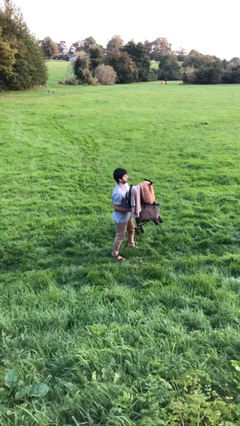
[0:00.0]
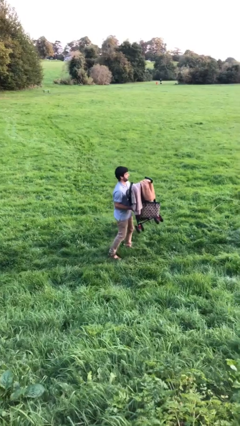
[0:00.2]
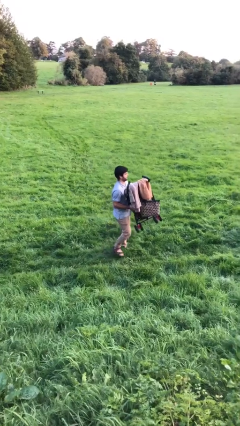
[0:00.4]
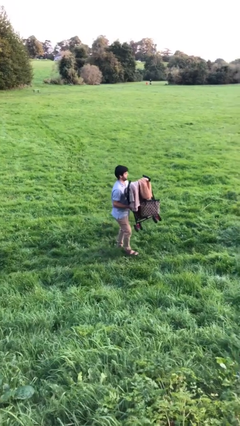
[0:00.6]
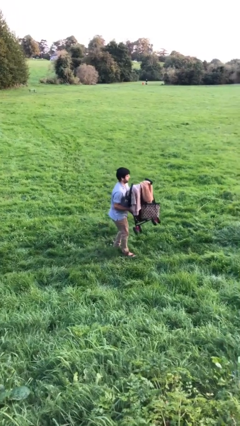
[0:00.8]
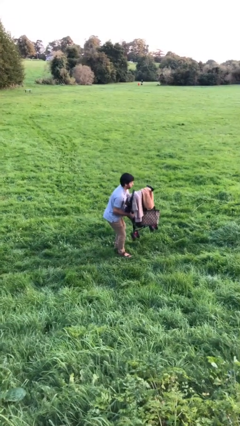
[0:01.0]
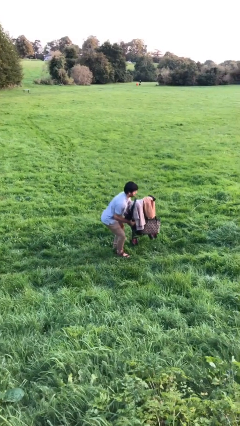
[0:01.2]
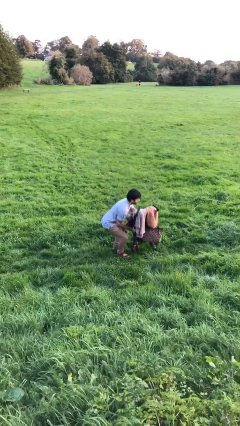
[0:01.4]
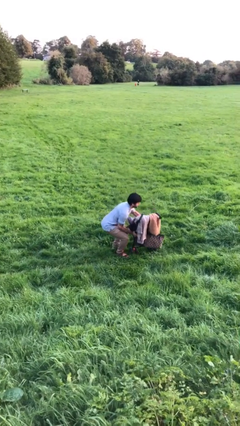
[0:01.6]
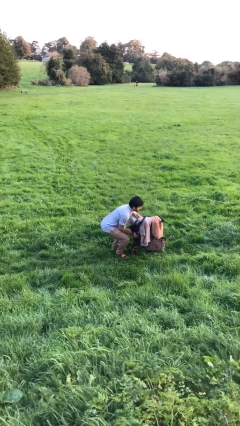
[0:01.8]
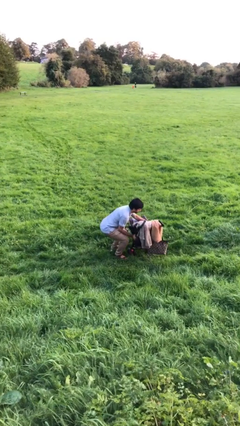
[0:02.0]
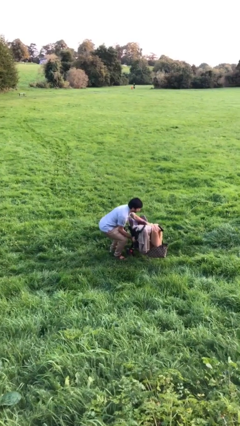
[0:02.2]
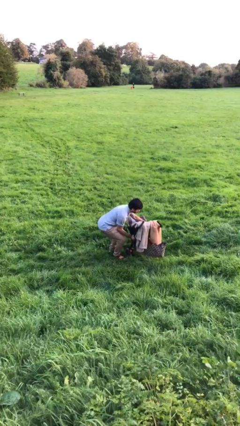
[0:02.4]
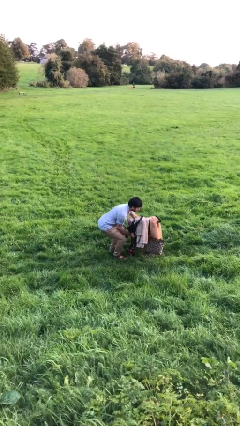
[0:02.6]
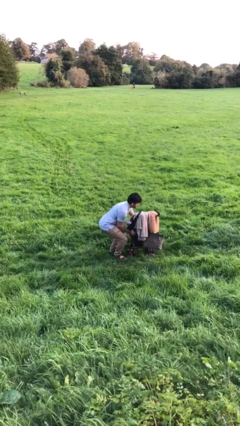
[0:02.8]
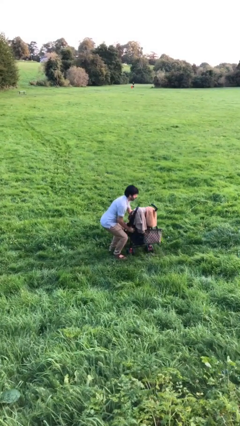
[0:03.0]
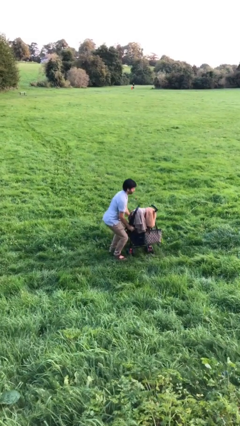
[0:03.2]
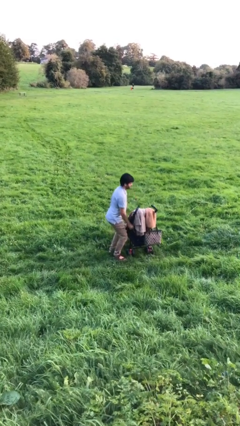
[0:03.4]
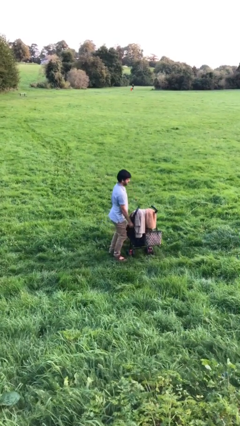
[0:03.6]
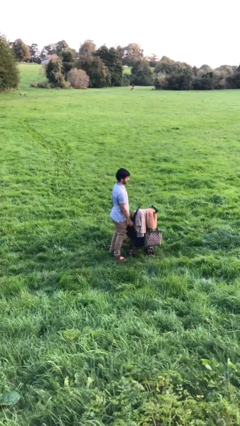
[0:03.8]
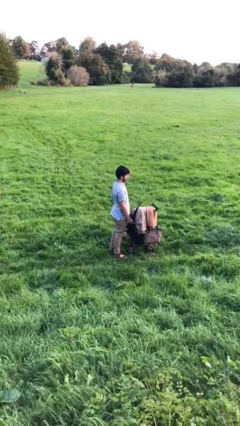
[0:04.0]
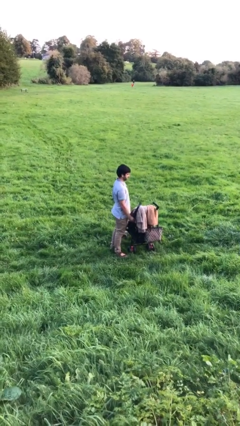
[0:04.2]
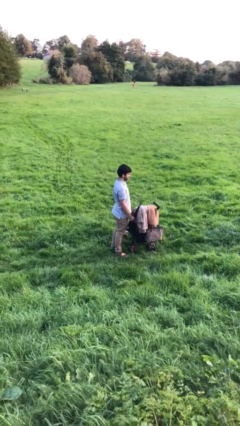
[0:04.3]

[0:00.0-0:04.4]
person puts down object on floor

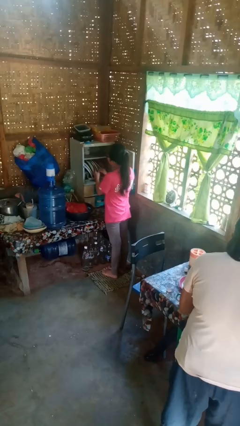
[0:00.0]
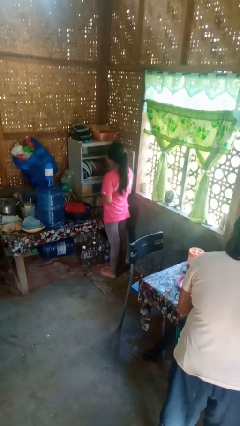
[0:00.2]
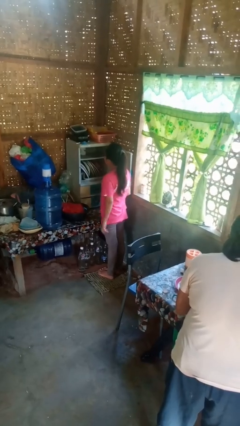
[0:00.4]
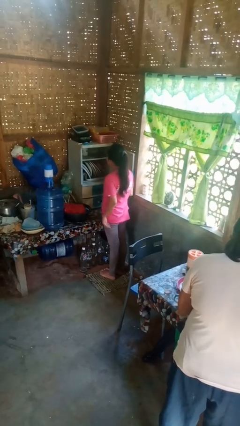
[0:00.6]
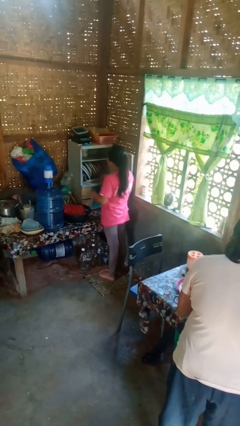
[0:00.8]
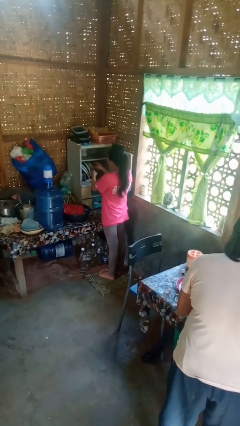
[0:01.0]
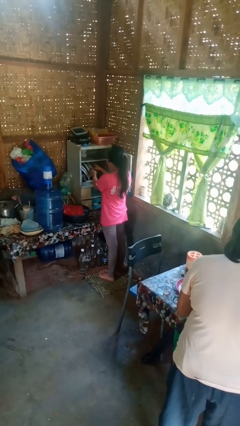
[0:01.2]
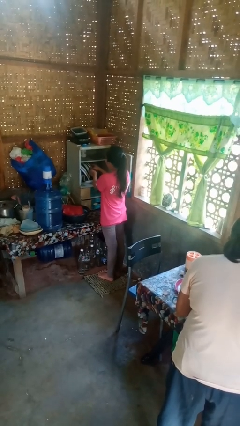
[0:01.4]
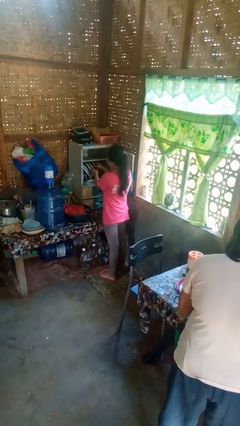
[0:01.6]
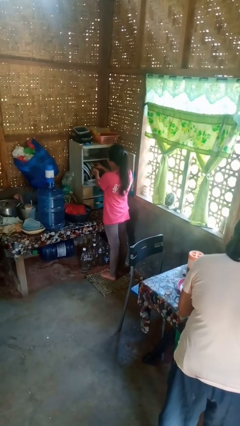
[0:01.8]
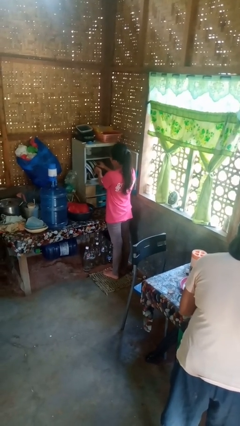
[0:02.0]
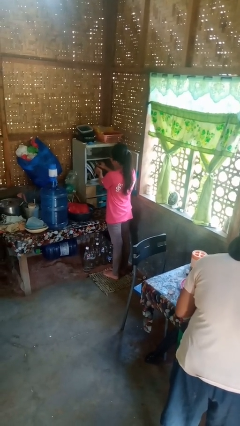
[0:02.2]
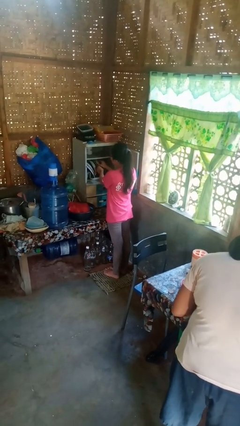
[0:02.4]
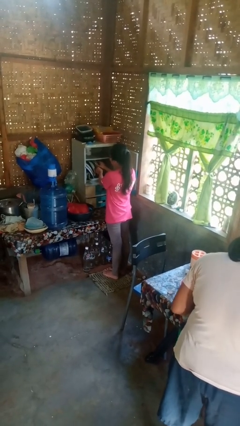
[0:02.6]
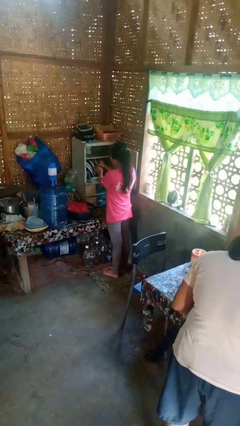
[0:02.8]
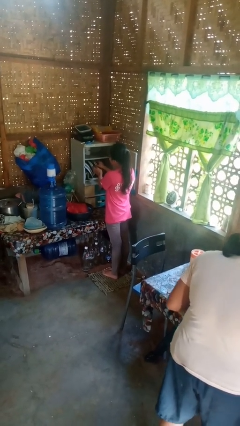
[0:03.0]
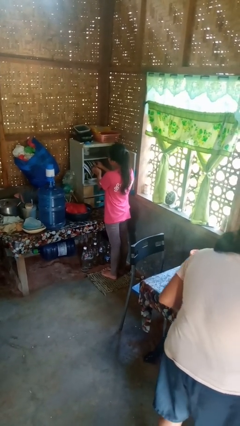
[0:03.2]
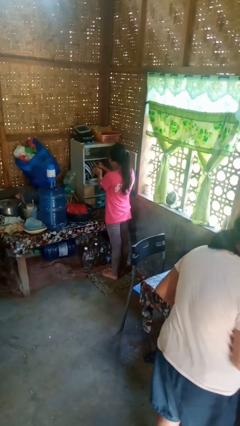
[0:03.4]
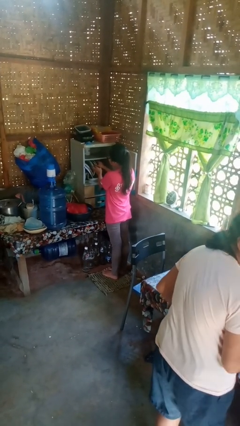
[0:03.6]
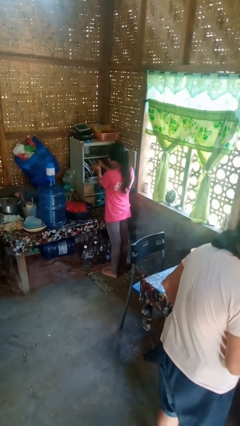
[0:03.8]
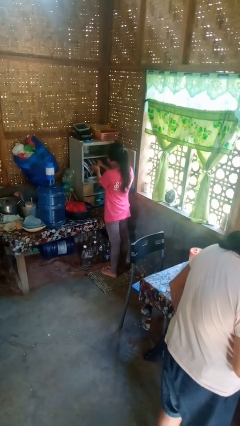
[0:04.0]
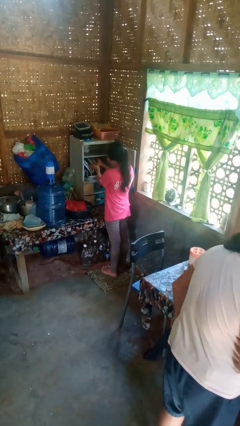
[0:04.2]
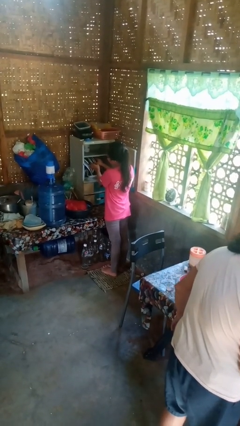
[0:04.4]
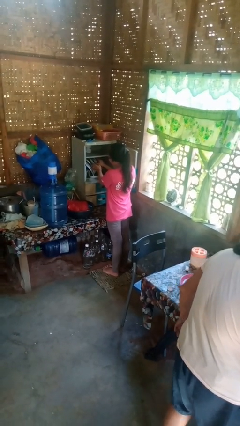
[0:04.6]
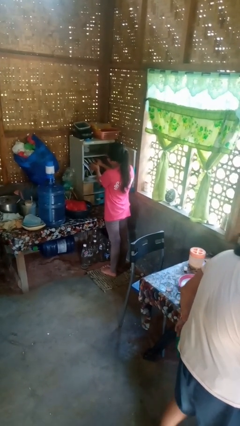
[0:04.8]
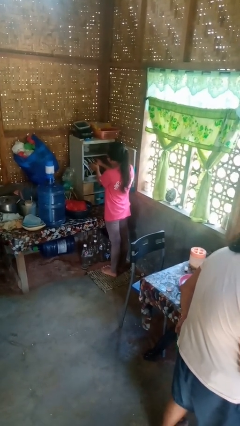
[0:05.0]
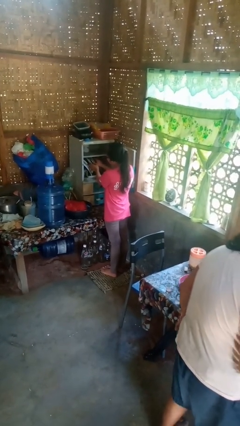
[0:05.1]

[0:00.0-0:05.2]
person searches in cabinet

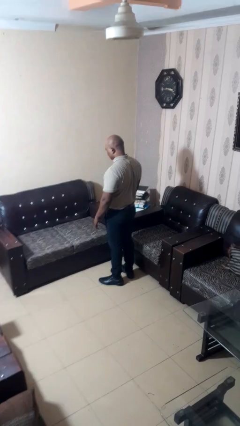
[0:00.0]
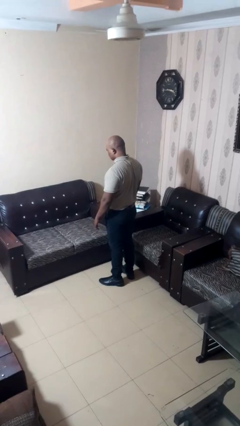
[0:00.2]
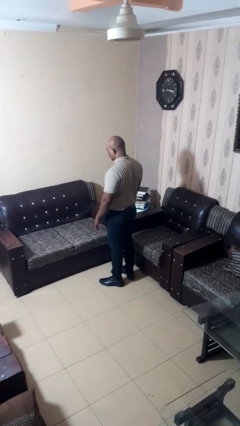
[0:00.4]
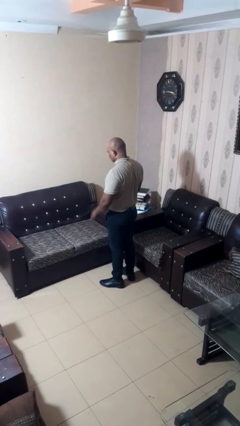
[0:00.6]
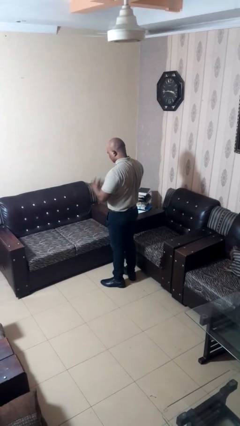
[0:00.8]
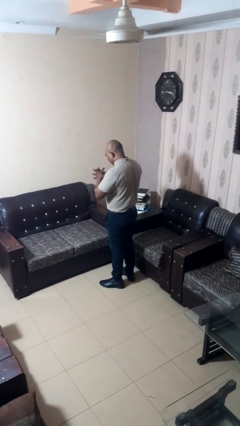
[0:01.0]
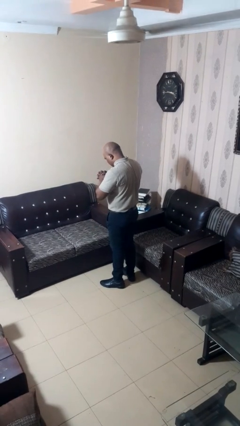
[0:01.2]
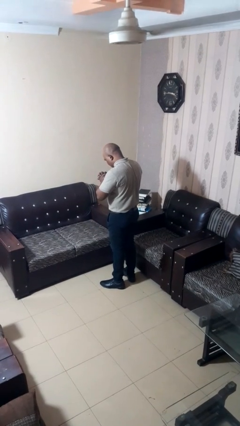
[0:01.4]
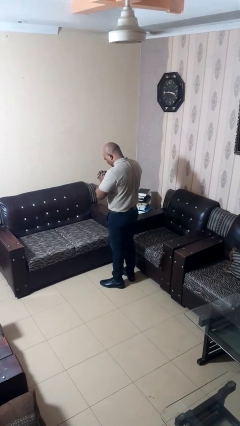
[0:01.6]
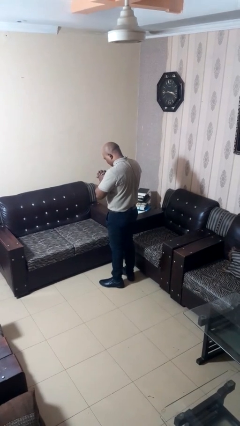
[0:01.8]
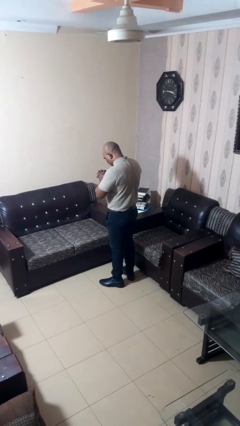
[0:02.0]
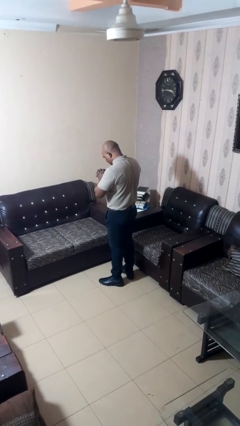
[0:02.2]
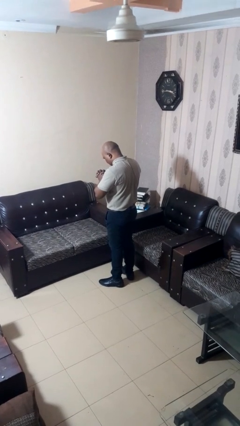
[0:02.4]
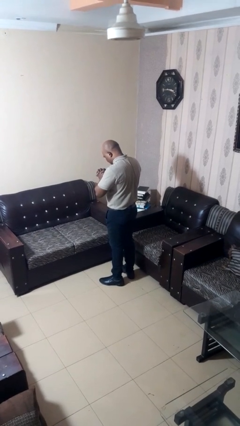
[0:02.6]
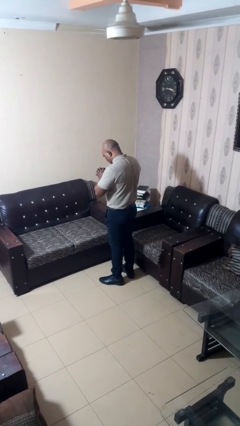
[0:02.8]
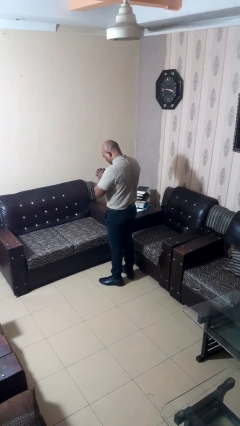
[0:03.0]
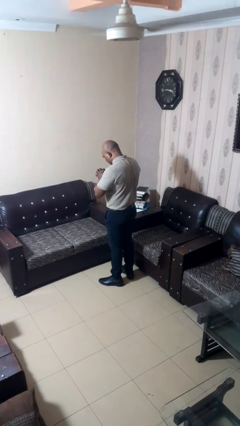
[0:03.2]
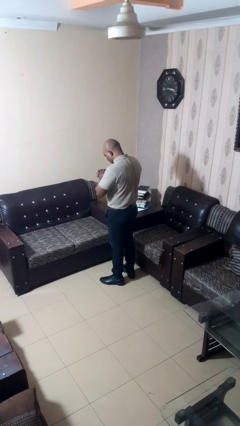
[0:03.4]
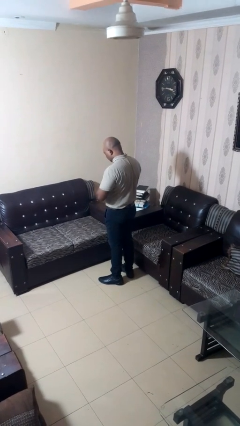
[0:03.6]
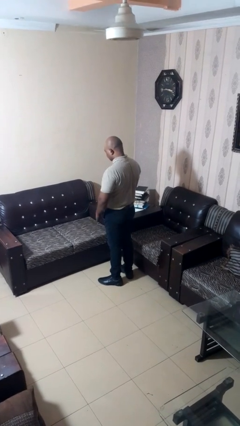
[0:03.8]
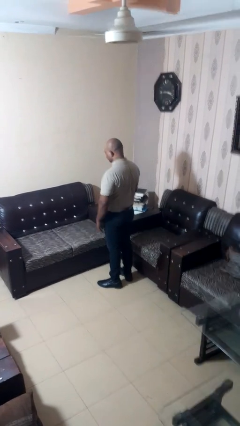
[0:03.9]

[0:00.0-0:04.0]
person prays

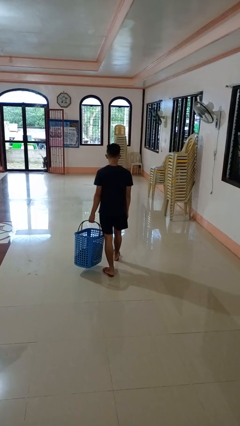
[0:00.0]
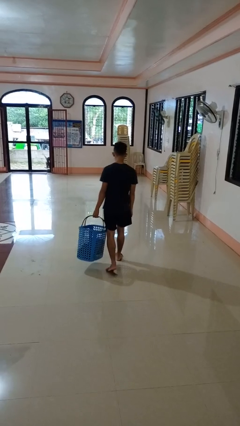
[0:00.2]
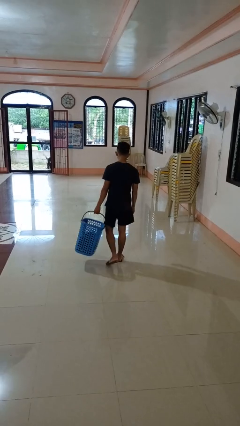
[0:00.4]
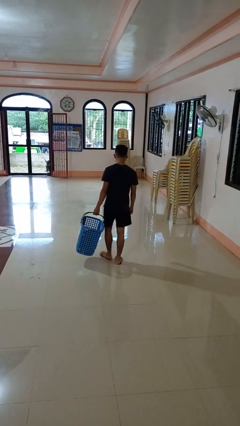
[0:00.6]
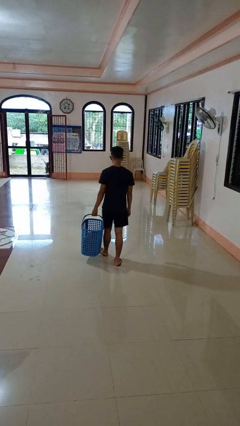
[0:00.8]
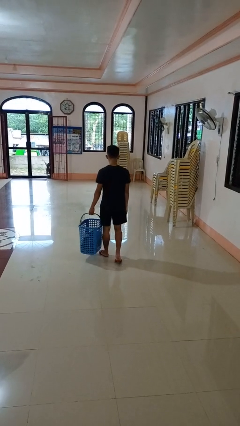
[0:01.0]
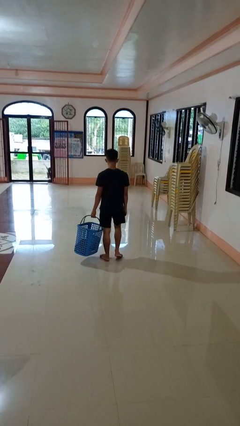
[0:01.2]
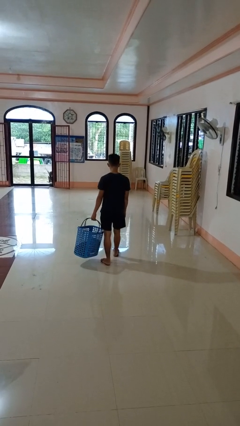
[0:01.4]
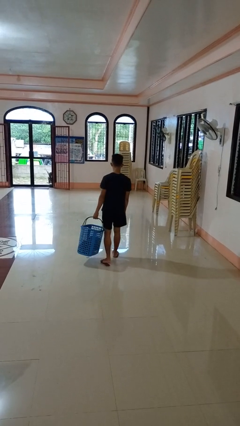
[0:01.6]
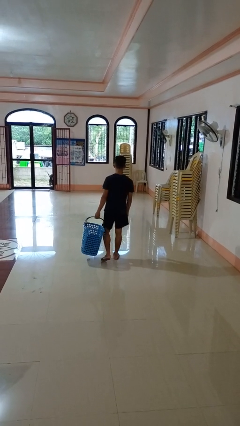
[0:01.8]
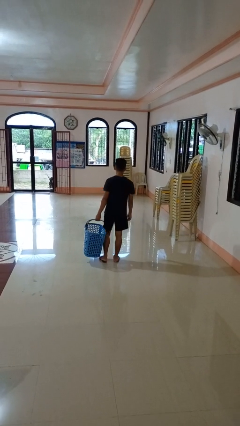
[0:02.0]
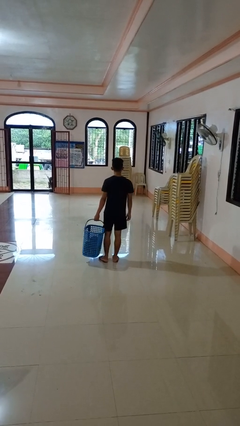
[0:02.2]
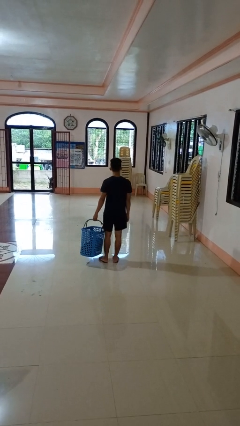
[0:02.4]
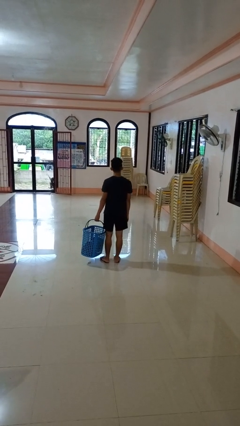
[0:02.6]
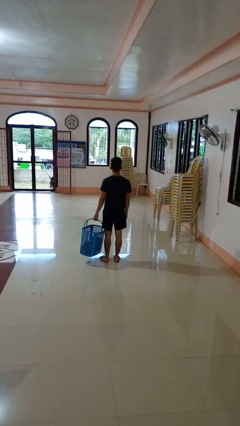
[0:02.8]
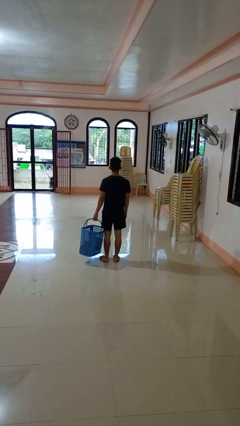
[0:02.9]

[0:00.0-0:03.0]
person carries laundry basket

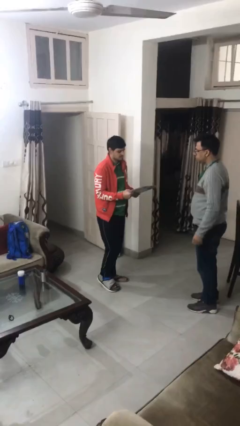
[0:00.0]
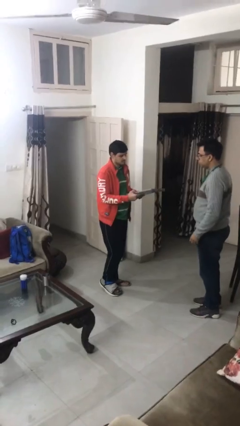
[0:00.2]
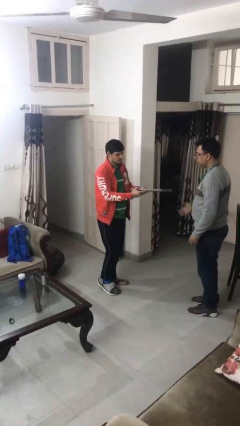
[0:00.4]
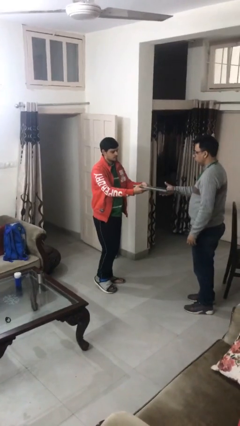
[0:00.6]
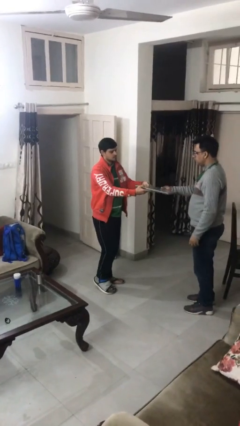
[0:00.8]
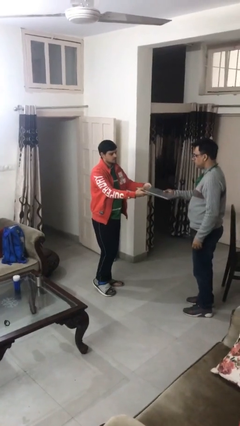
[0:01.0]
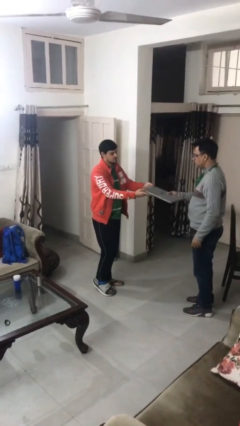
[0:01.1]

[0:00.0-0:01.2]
person transfers object to person
